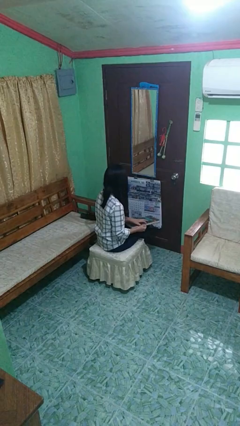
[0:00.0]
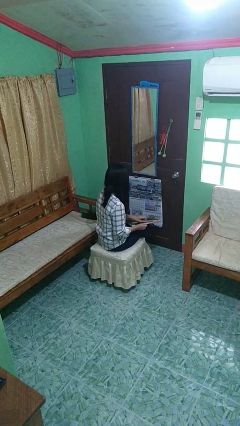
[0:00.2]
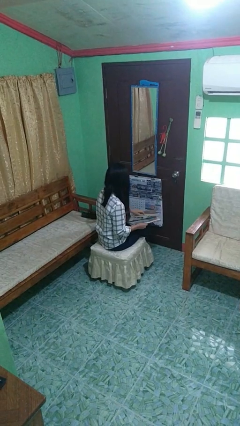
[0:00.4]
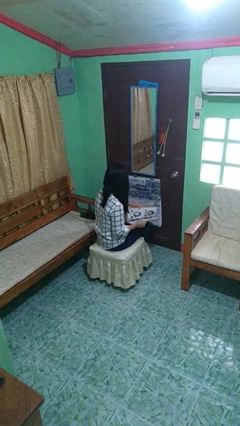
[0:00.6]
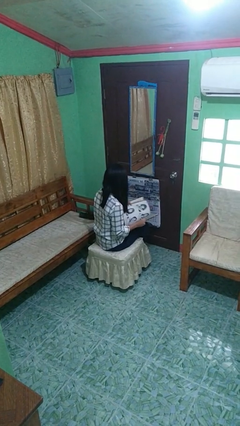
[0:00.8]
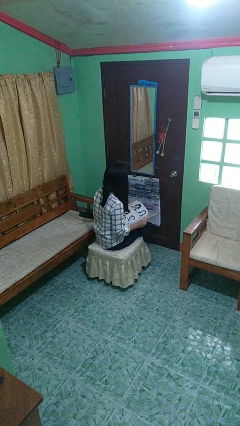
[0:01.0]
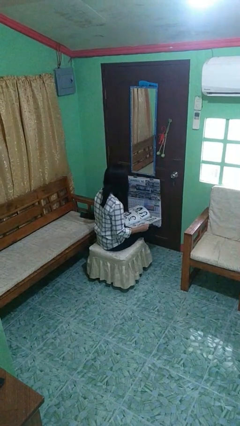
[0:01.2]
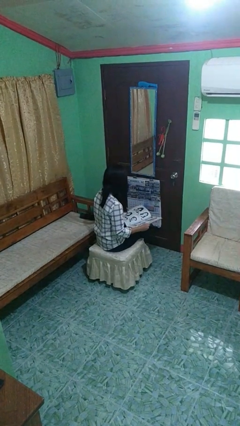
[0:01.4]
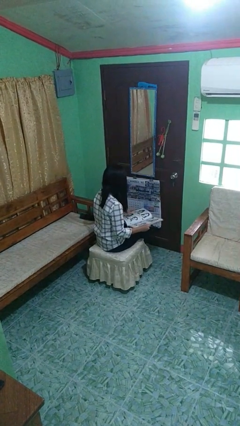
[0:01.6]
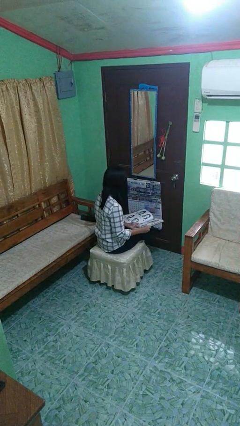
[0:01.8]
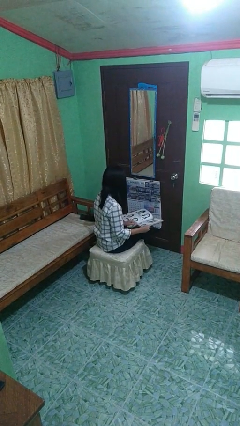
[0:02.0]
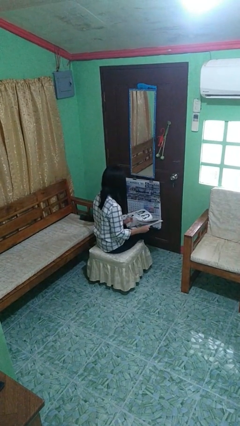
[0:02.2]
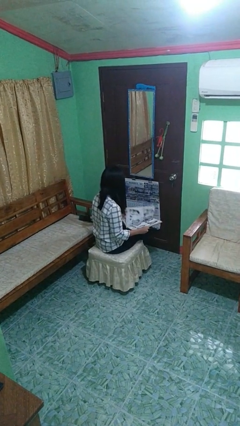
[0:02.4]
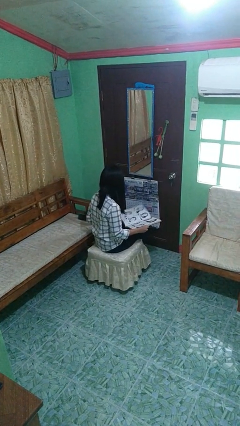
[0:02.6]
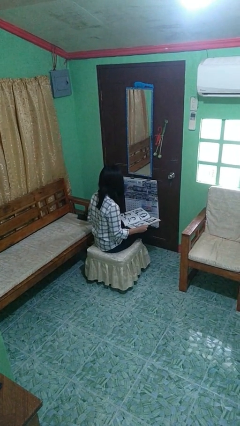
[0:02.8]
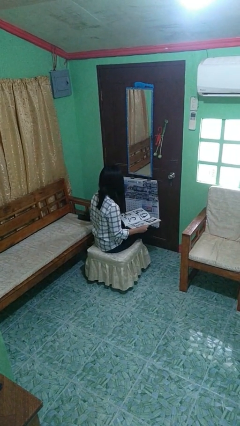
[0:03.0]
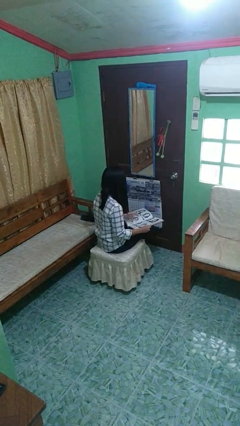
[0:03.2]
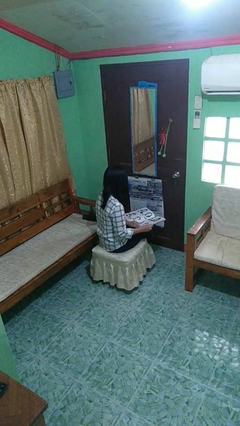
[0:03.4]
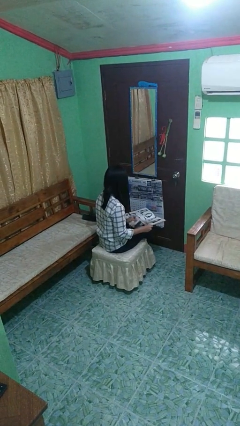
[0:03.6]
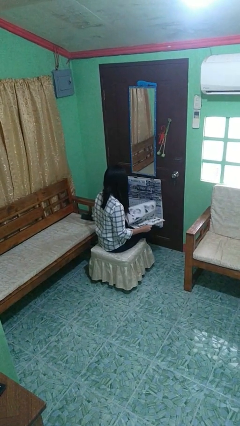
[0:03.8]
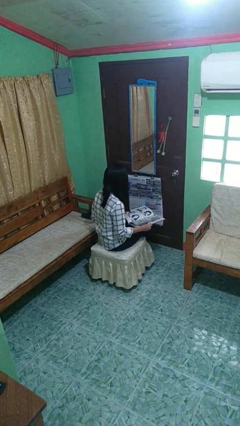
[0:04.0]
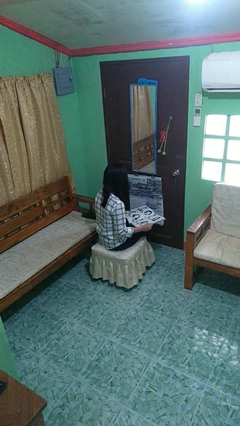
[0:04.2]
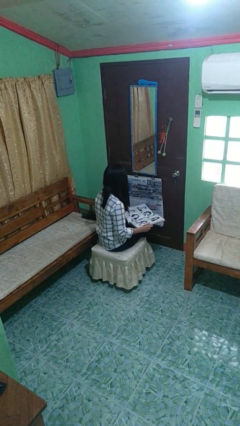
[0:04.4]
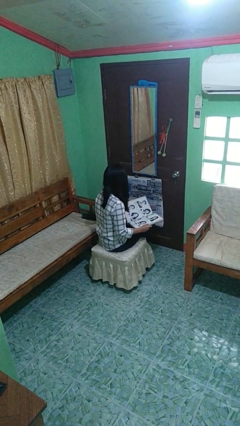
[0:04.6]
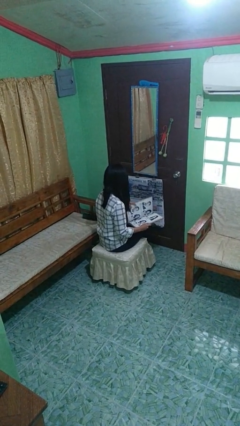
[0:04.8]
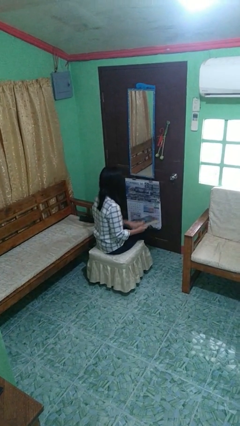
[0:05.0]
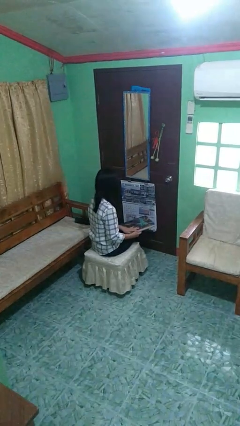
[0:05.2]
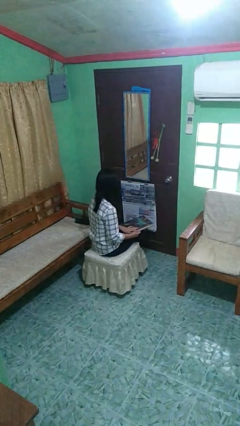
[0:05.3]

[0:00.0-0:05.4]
person reads book

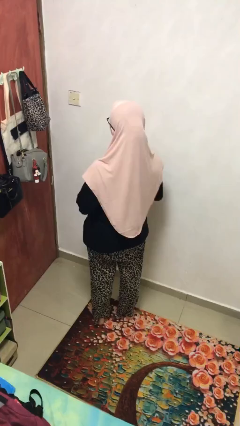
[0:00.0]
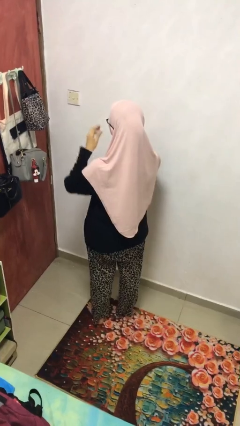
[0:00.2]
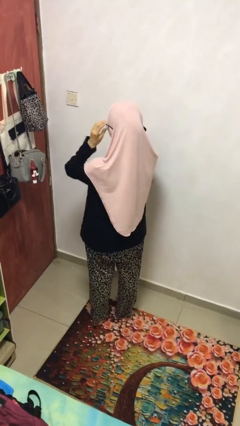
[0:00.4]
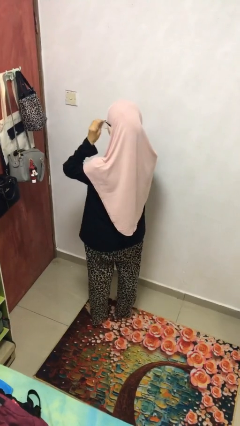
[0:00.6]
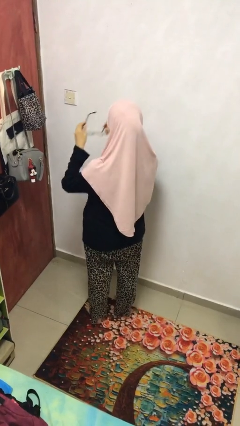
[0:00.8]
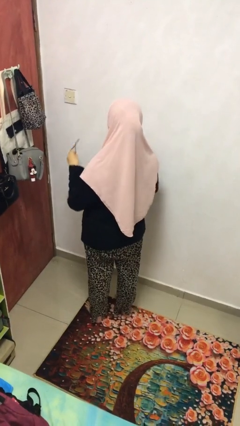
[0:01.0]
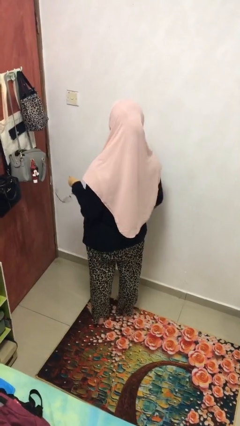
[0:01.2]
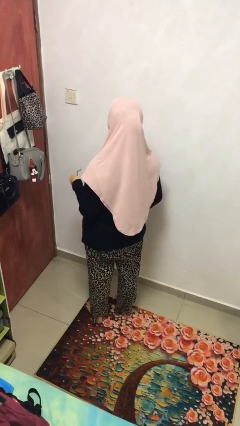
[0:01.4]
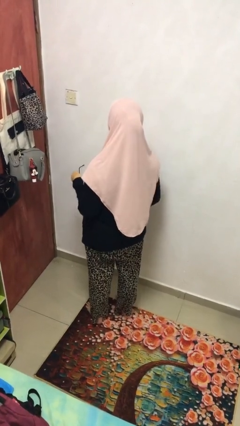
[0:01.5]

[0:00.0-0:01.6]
person takes off glasses

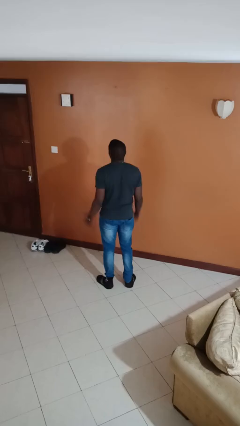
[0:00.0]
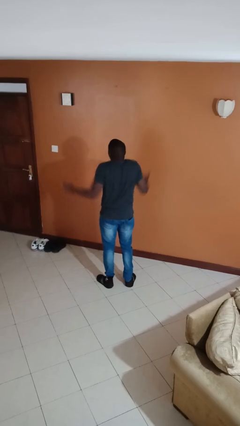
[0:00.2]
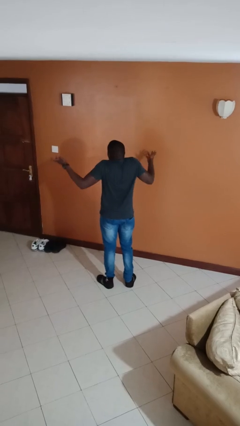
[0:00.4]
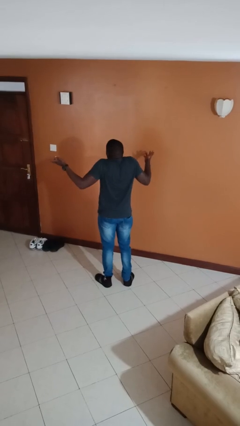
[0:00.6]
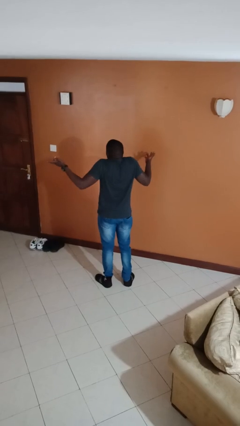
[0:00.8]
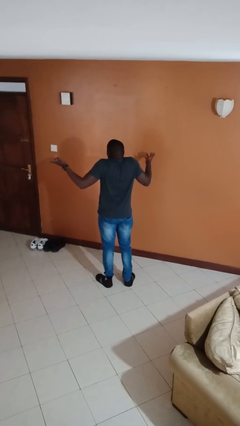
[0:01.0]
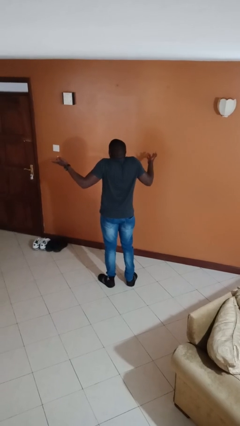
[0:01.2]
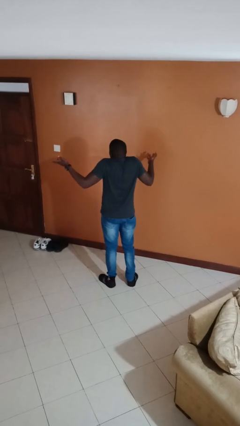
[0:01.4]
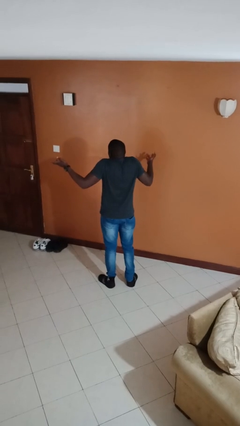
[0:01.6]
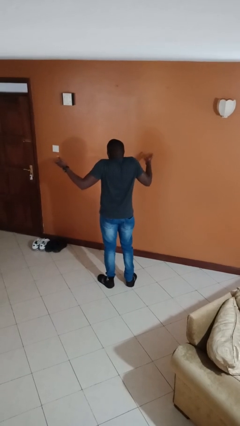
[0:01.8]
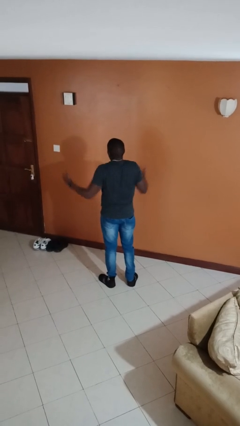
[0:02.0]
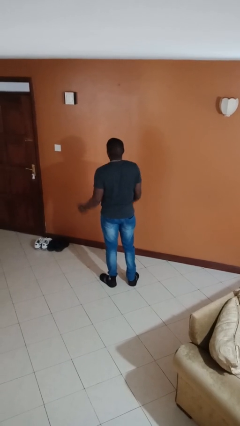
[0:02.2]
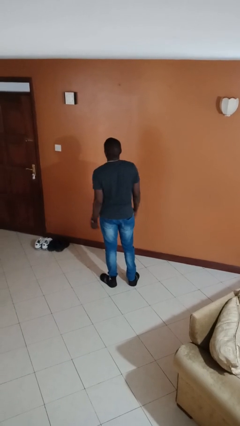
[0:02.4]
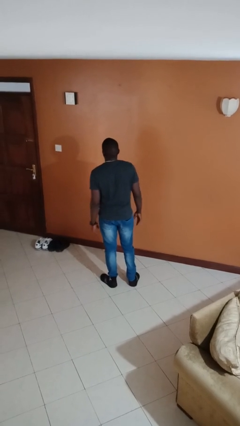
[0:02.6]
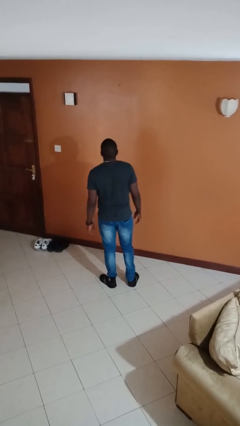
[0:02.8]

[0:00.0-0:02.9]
person shrugs

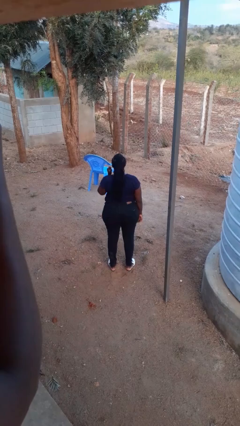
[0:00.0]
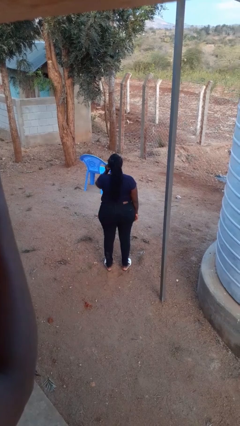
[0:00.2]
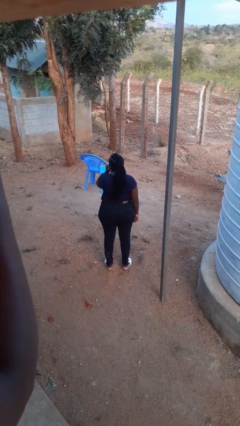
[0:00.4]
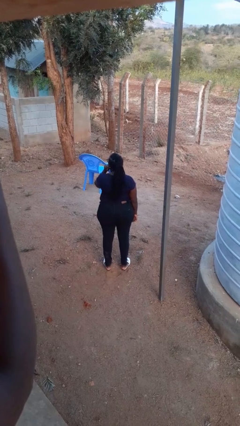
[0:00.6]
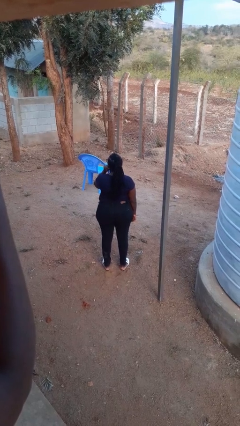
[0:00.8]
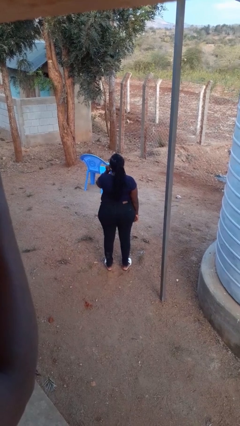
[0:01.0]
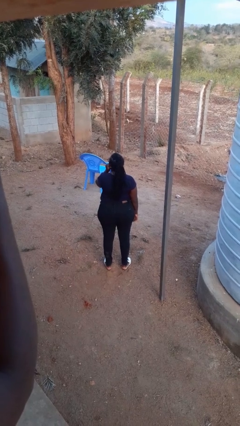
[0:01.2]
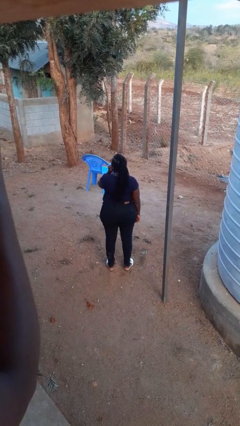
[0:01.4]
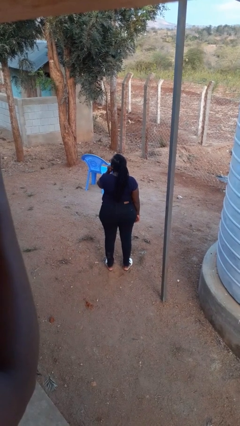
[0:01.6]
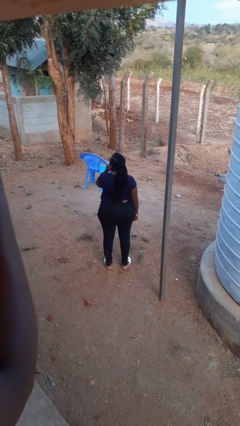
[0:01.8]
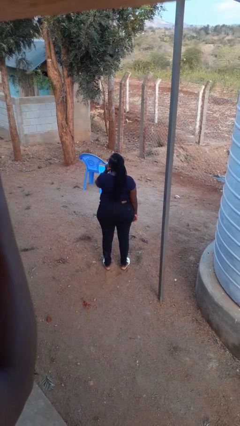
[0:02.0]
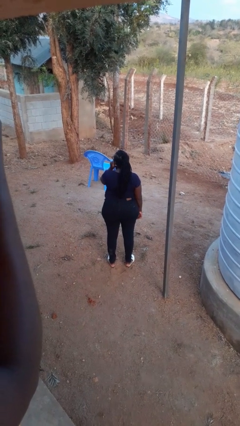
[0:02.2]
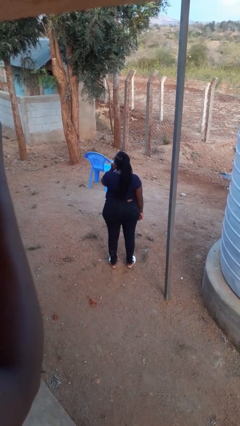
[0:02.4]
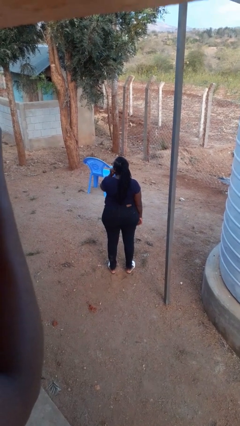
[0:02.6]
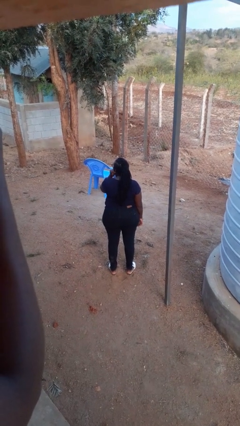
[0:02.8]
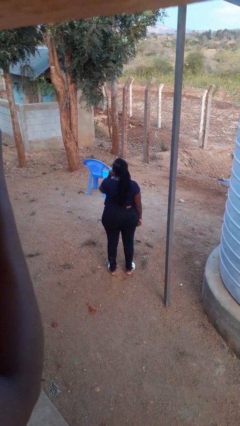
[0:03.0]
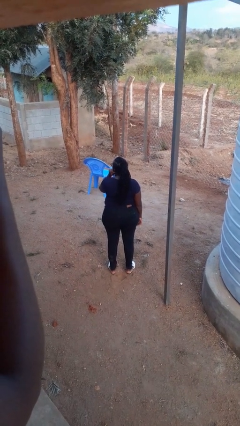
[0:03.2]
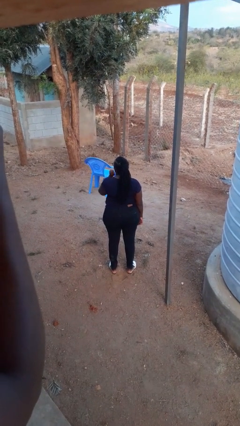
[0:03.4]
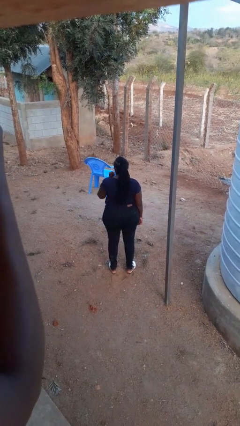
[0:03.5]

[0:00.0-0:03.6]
person touches earlobe

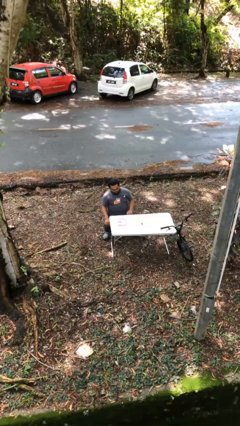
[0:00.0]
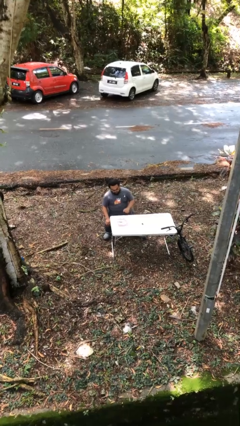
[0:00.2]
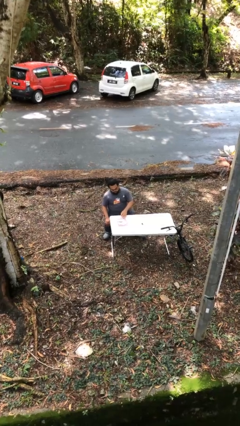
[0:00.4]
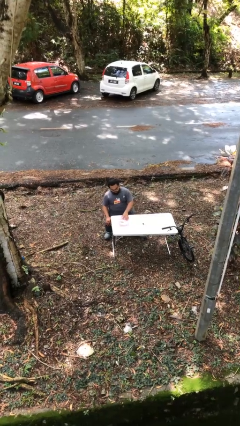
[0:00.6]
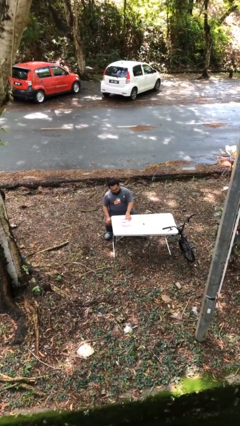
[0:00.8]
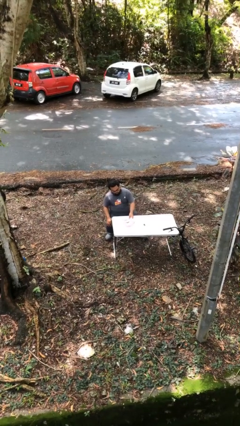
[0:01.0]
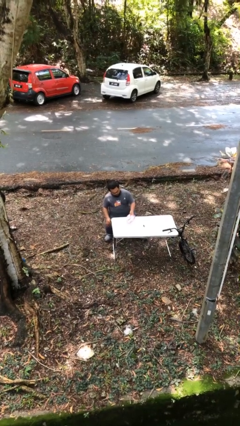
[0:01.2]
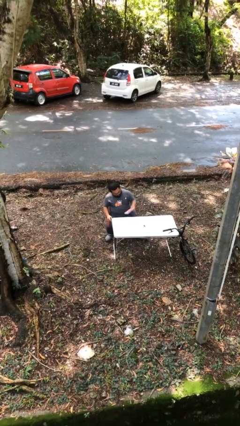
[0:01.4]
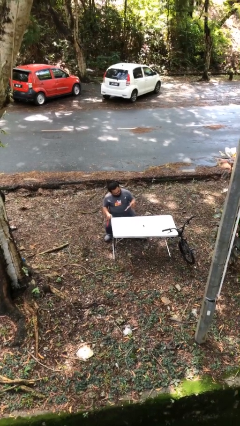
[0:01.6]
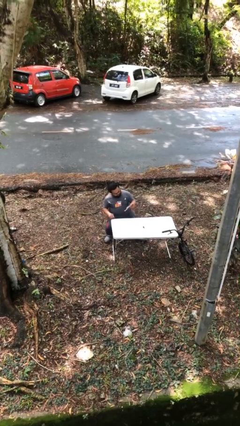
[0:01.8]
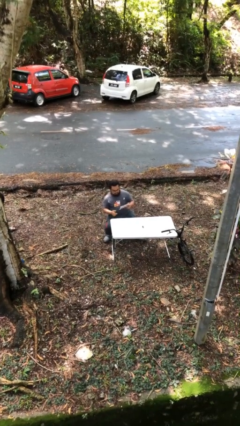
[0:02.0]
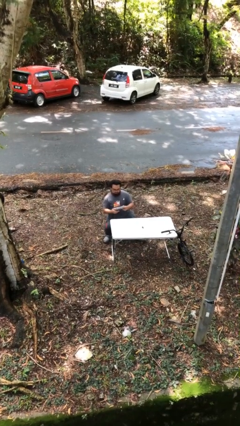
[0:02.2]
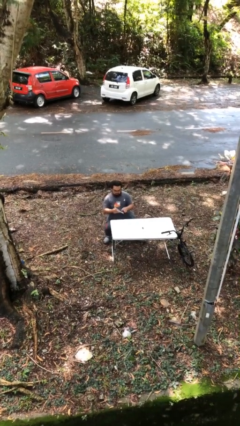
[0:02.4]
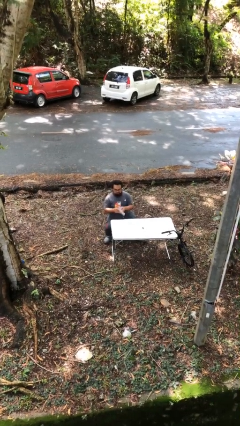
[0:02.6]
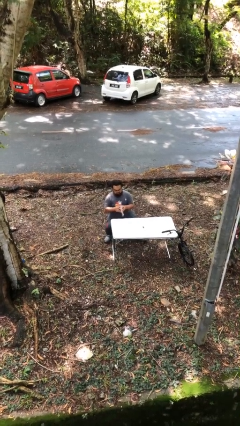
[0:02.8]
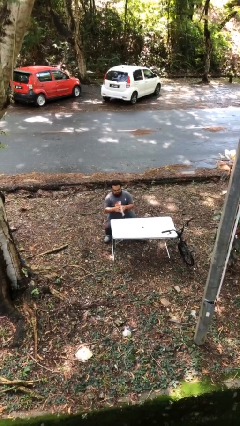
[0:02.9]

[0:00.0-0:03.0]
person picks up object from table

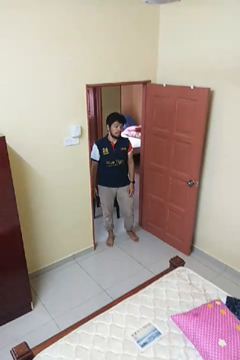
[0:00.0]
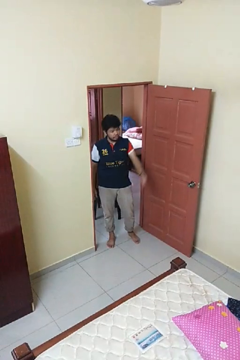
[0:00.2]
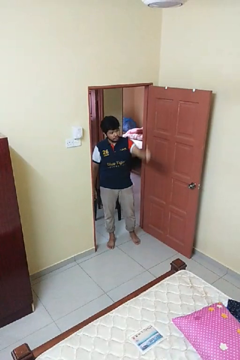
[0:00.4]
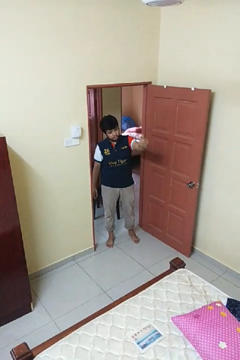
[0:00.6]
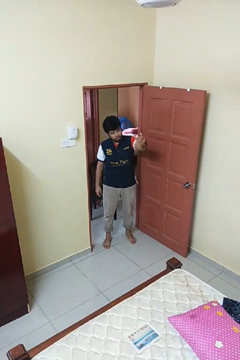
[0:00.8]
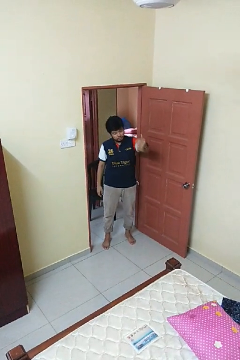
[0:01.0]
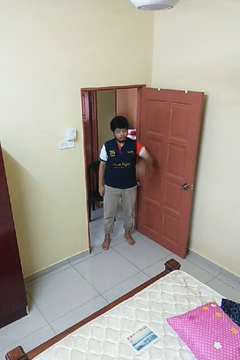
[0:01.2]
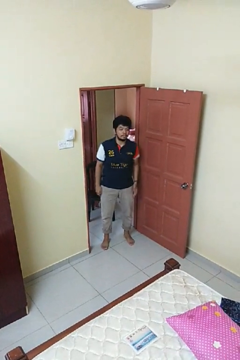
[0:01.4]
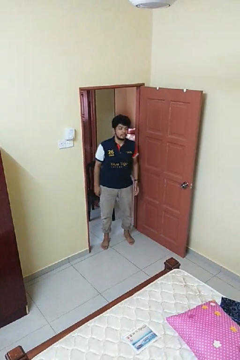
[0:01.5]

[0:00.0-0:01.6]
person gestures come here
